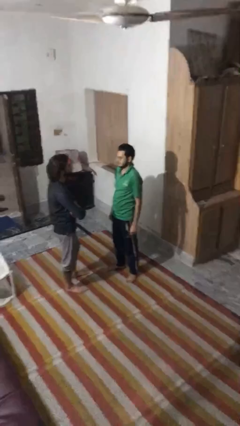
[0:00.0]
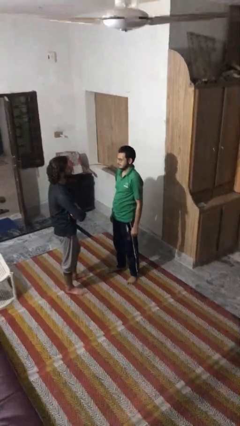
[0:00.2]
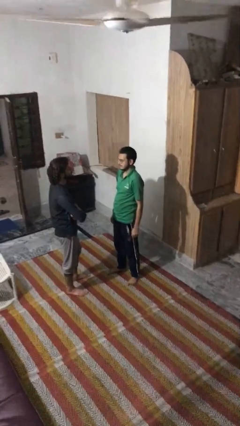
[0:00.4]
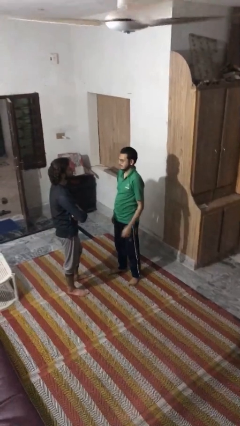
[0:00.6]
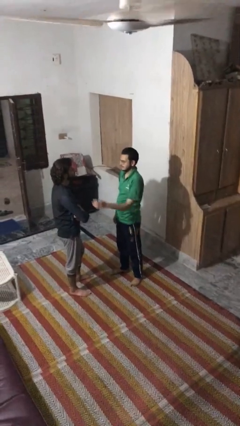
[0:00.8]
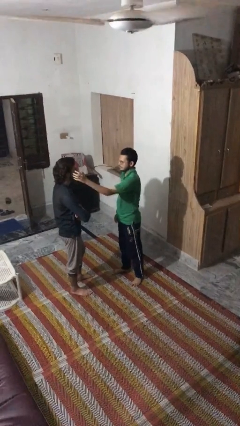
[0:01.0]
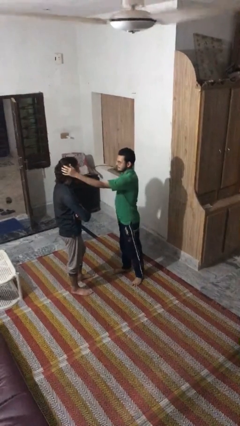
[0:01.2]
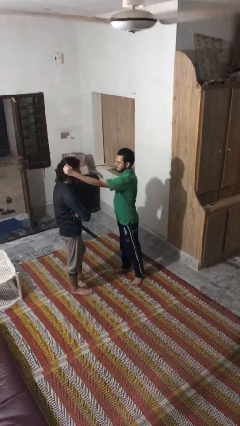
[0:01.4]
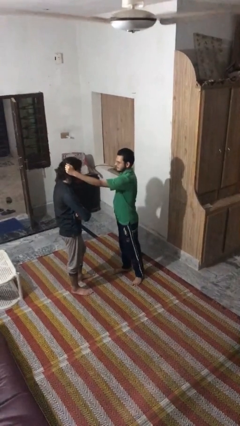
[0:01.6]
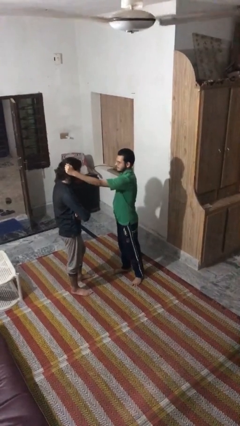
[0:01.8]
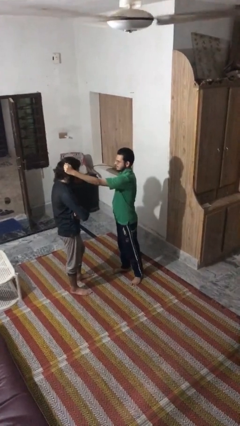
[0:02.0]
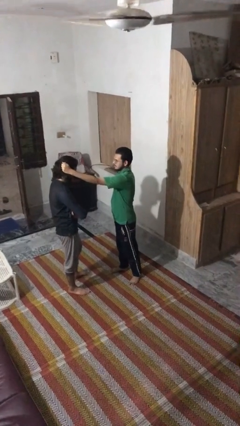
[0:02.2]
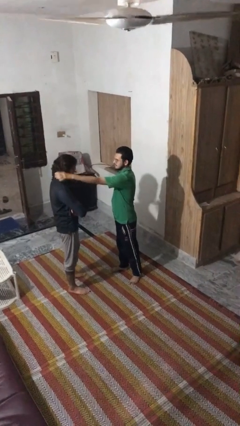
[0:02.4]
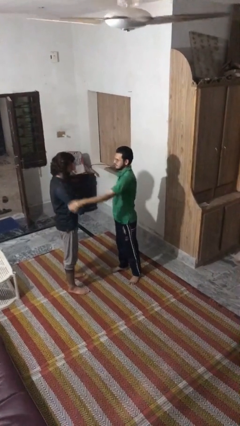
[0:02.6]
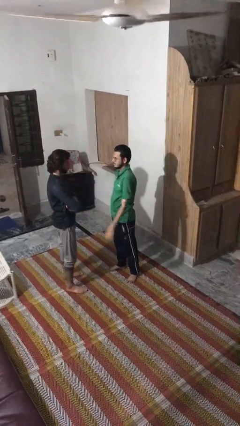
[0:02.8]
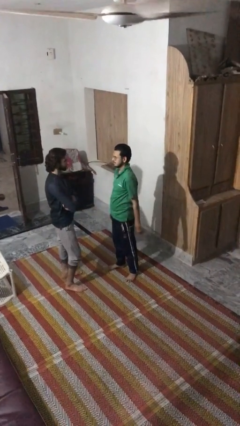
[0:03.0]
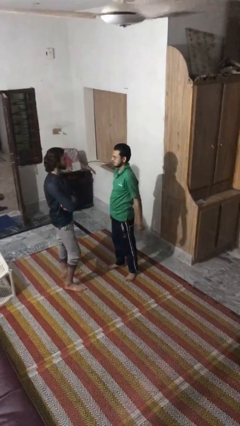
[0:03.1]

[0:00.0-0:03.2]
person grabs person by hair

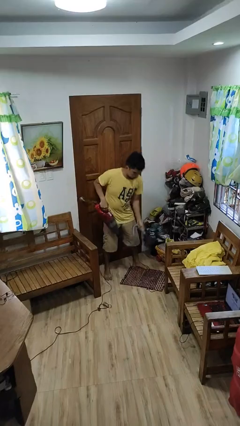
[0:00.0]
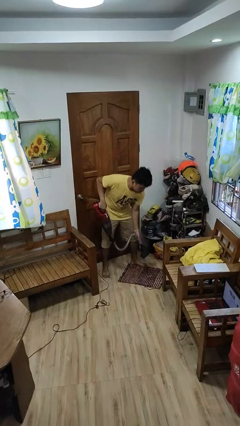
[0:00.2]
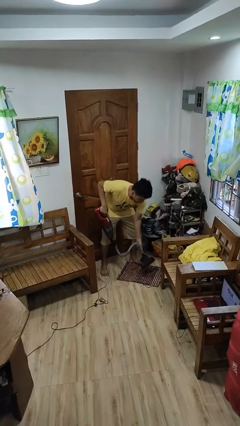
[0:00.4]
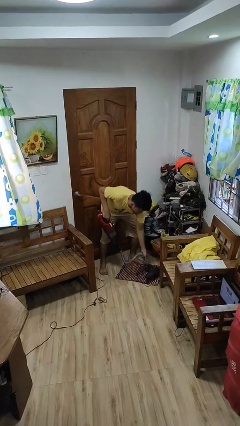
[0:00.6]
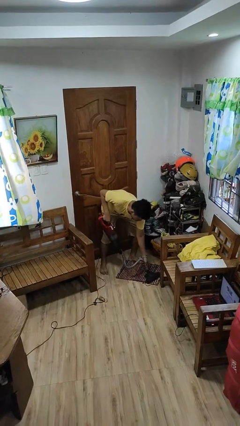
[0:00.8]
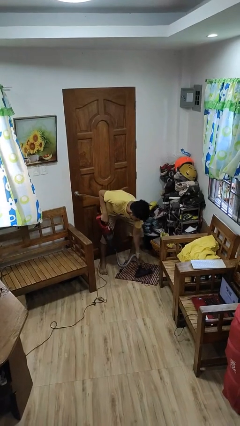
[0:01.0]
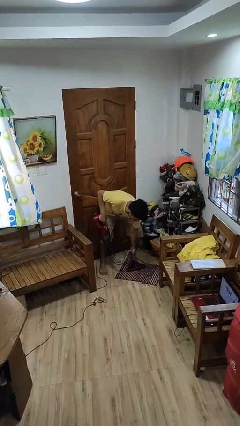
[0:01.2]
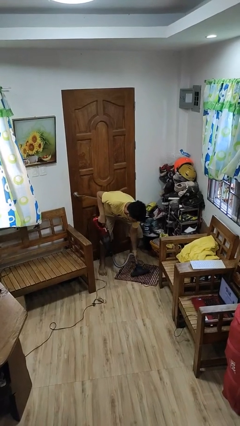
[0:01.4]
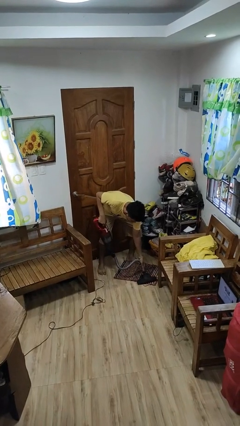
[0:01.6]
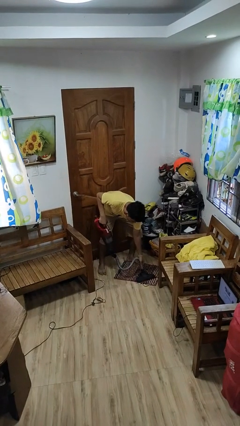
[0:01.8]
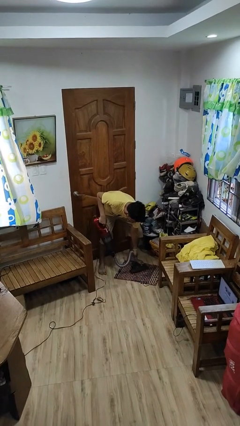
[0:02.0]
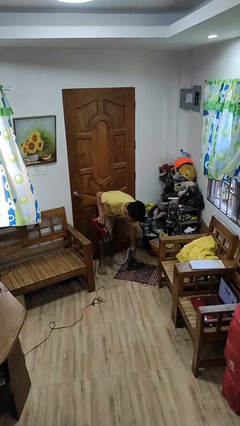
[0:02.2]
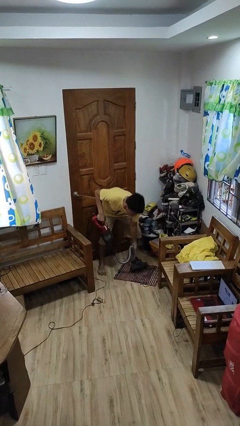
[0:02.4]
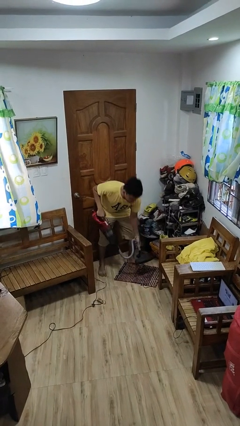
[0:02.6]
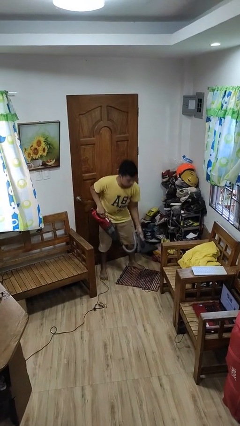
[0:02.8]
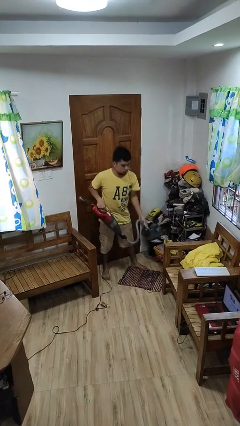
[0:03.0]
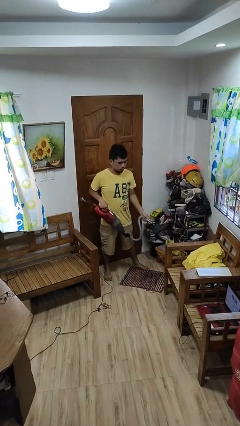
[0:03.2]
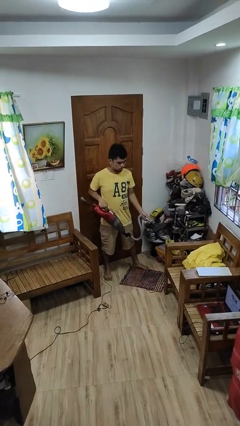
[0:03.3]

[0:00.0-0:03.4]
person vacuums carpet

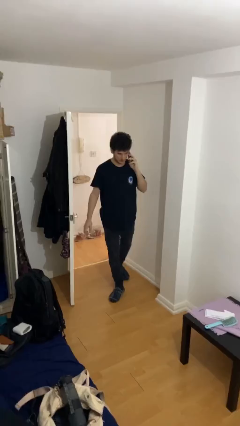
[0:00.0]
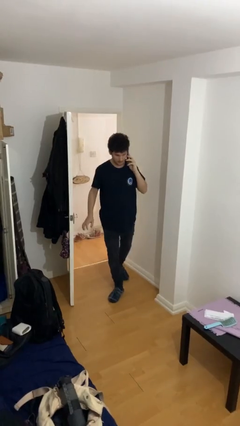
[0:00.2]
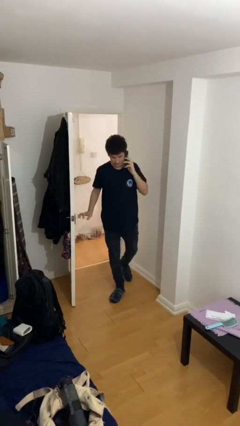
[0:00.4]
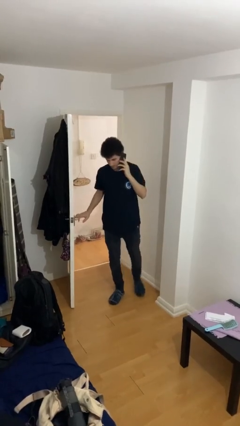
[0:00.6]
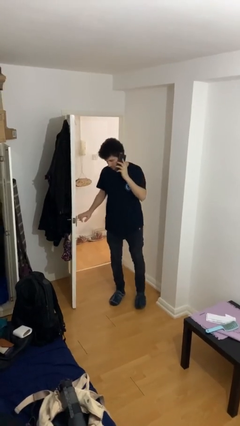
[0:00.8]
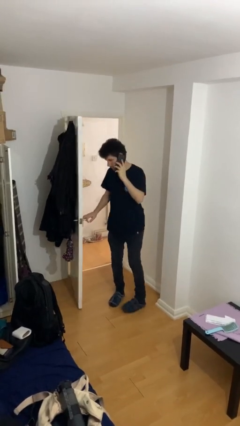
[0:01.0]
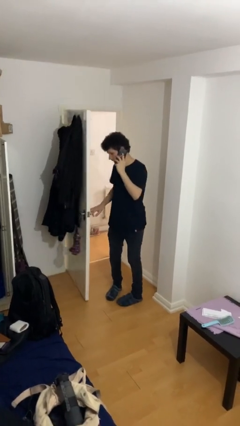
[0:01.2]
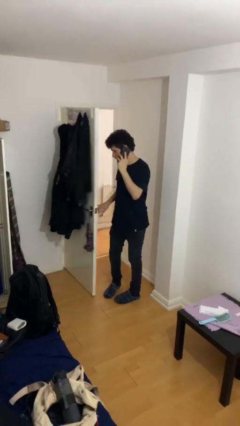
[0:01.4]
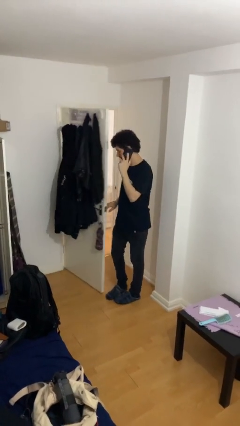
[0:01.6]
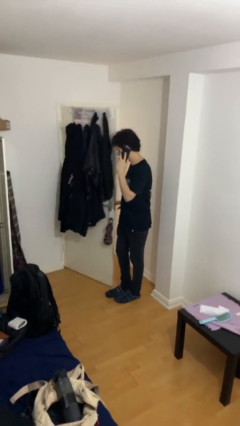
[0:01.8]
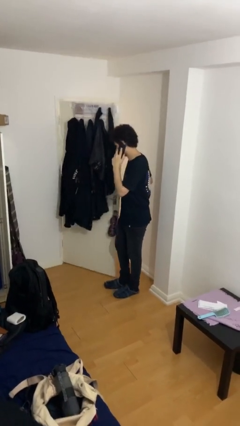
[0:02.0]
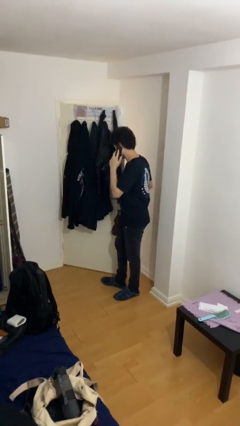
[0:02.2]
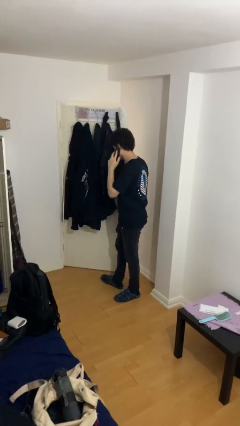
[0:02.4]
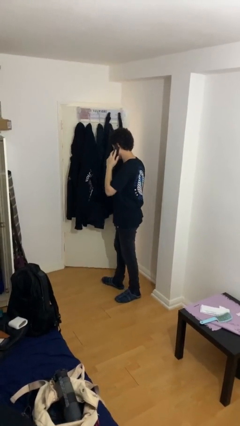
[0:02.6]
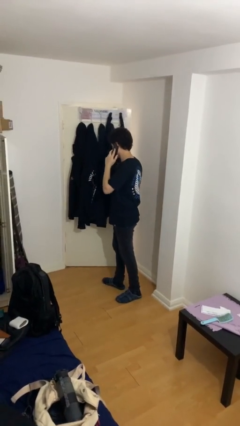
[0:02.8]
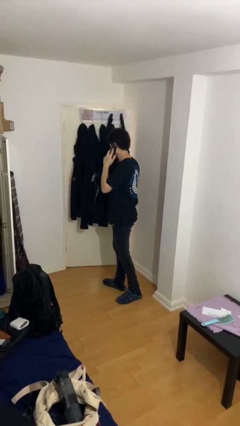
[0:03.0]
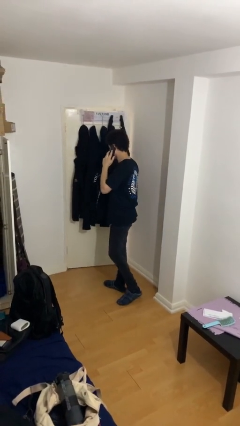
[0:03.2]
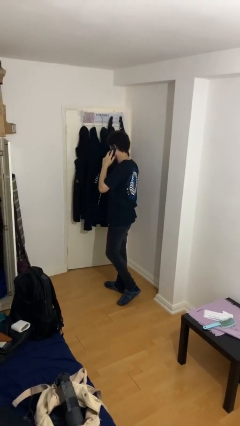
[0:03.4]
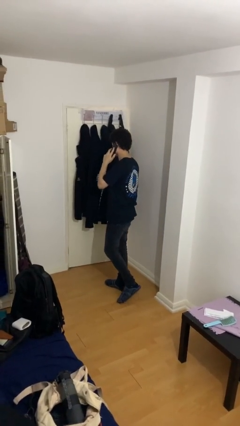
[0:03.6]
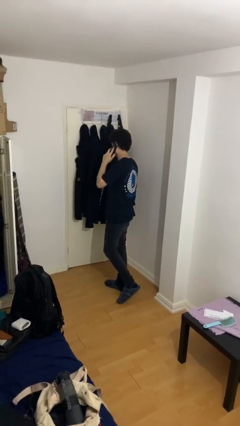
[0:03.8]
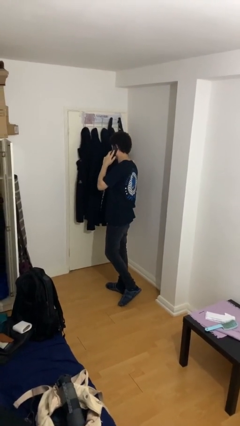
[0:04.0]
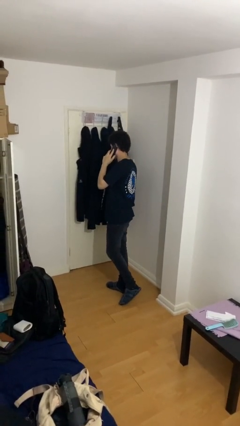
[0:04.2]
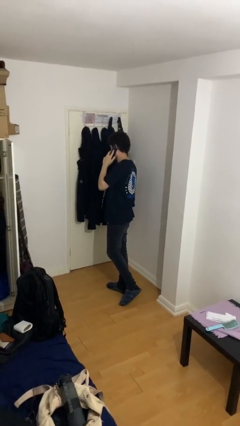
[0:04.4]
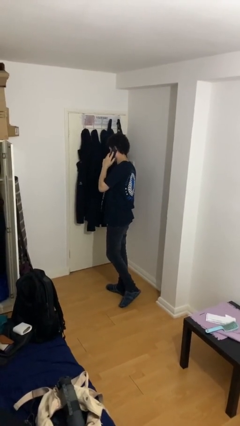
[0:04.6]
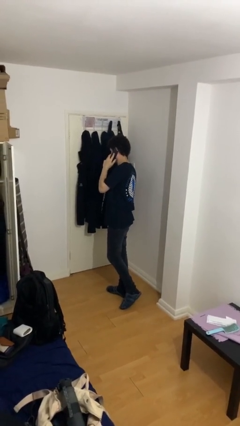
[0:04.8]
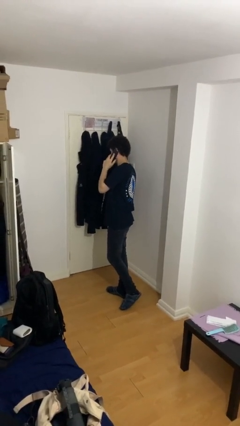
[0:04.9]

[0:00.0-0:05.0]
person closes facility door

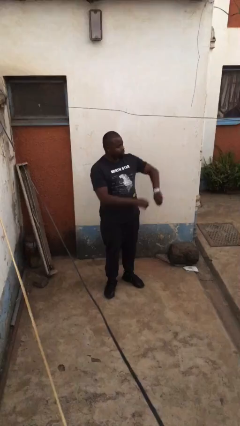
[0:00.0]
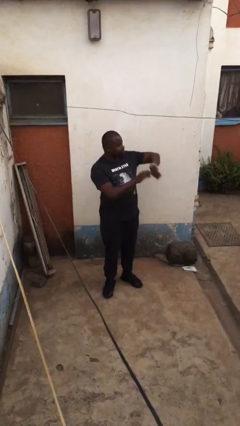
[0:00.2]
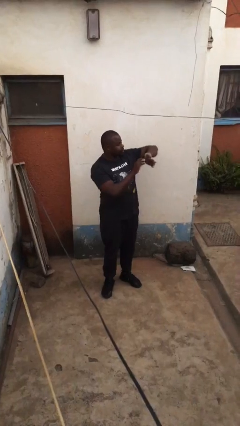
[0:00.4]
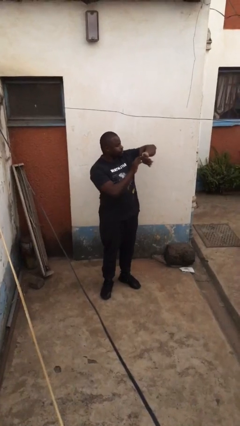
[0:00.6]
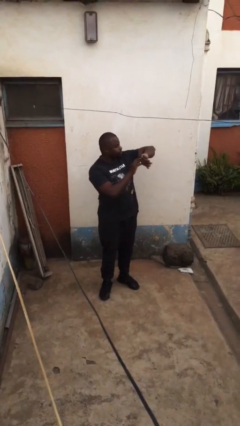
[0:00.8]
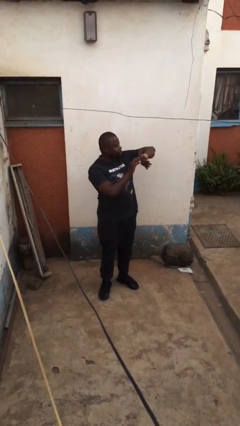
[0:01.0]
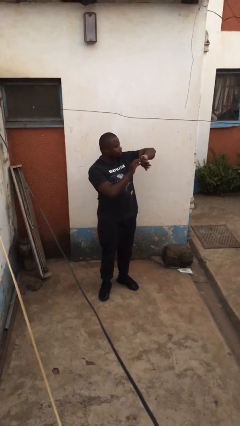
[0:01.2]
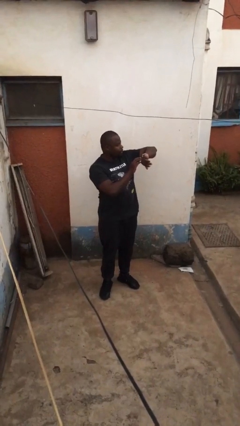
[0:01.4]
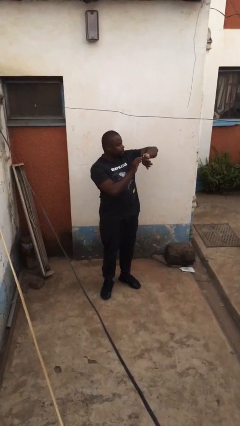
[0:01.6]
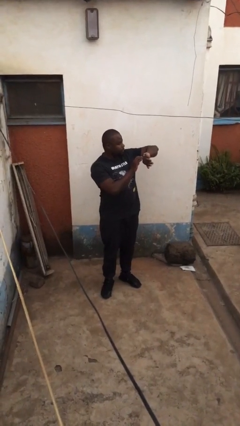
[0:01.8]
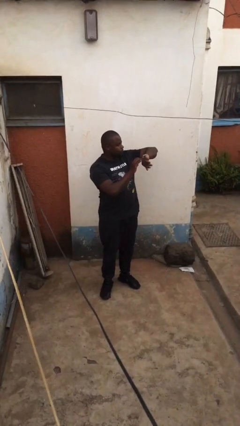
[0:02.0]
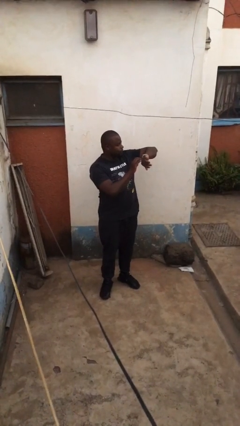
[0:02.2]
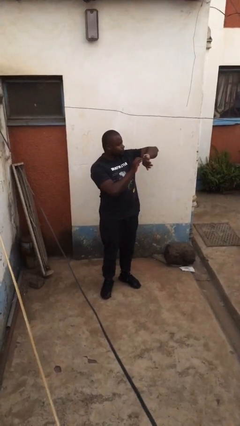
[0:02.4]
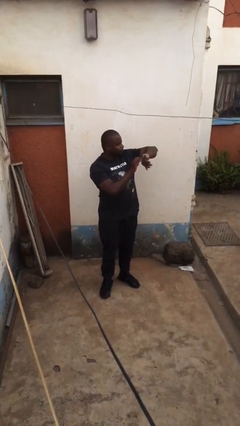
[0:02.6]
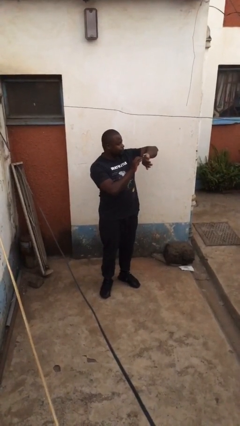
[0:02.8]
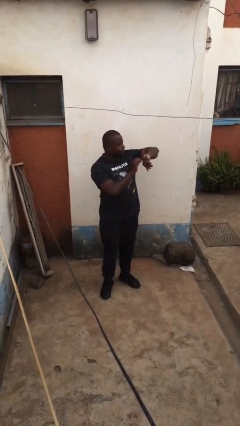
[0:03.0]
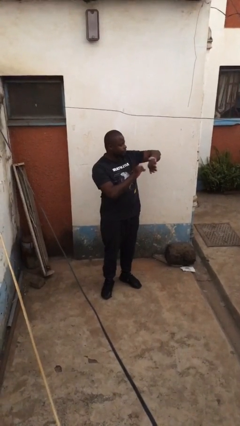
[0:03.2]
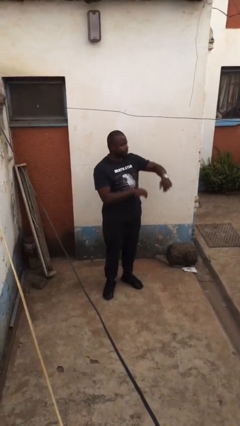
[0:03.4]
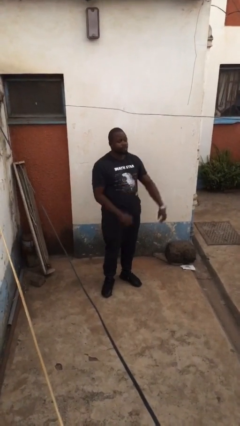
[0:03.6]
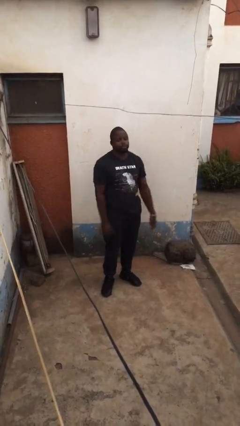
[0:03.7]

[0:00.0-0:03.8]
person looks at wristwatch

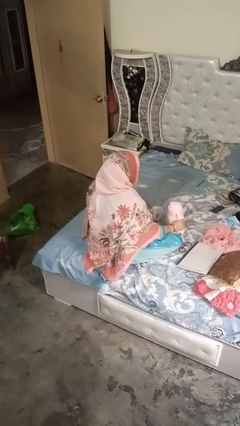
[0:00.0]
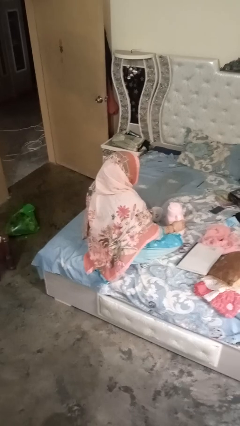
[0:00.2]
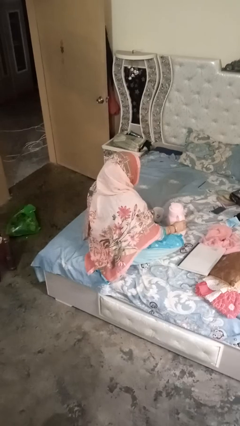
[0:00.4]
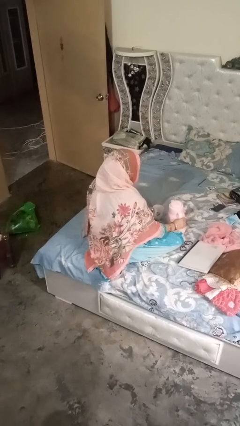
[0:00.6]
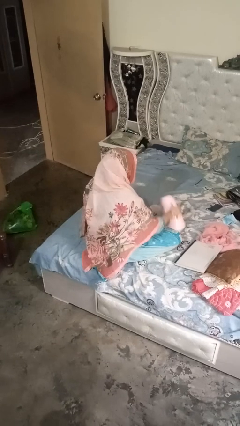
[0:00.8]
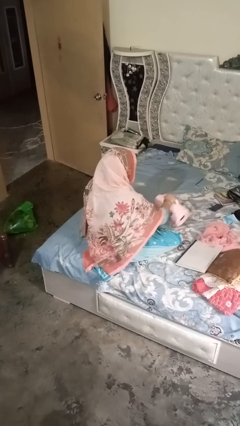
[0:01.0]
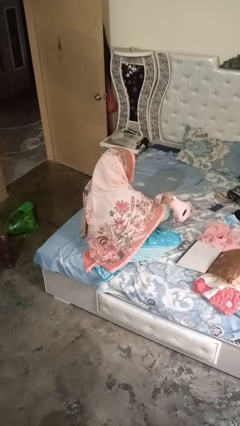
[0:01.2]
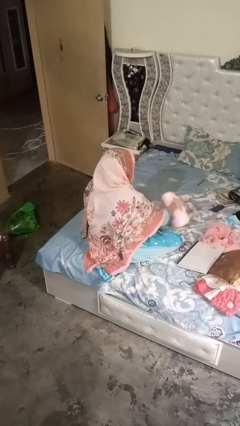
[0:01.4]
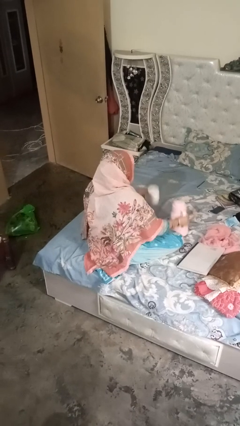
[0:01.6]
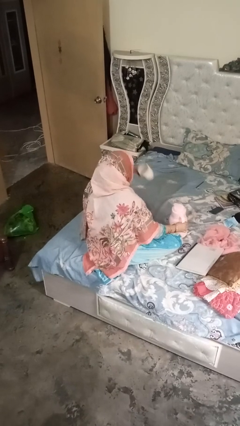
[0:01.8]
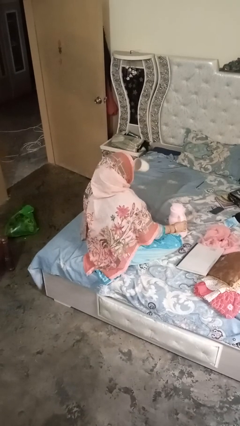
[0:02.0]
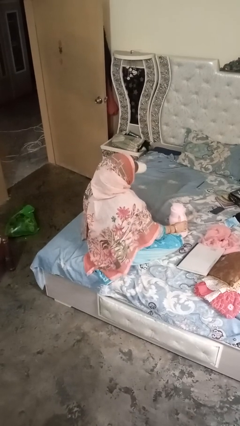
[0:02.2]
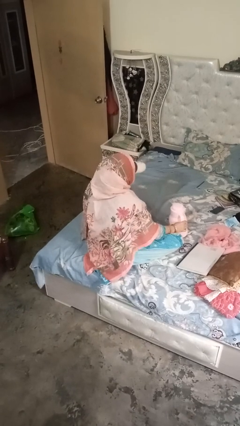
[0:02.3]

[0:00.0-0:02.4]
person pours coffee into mug
